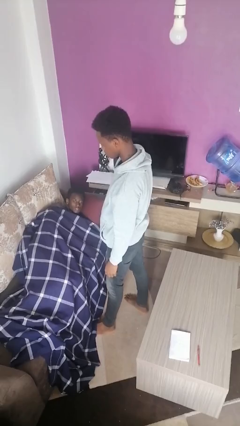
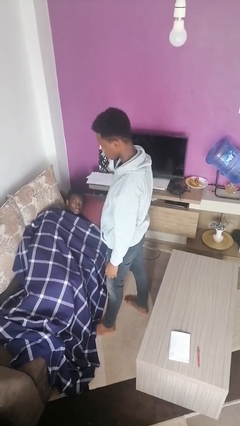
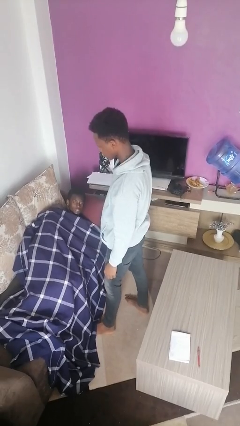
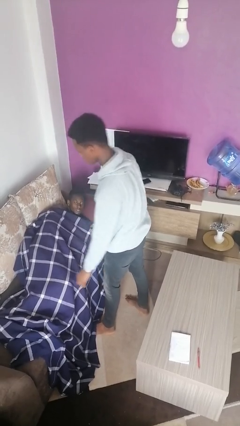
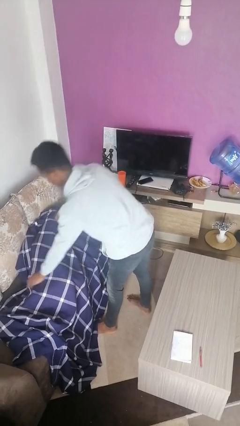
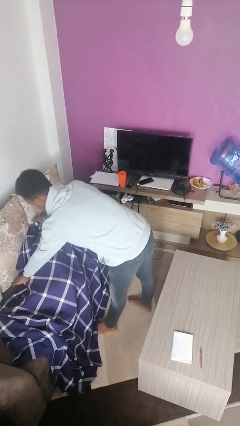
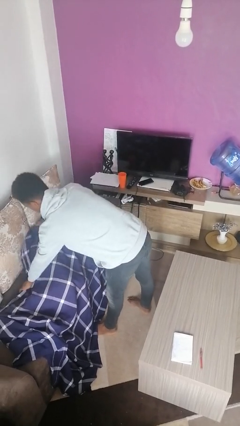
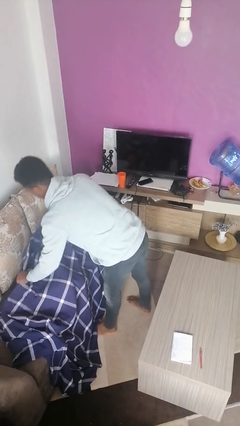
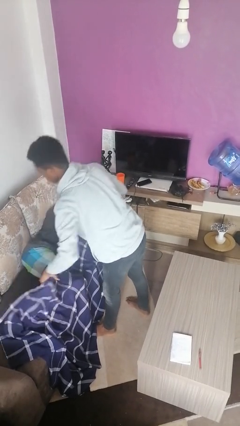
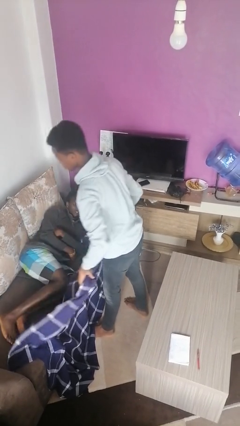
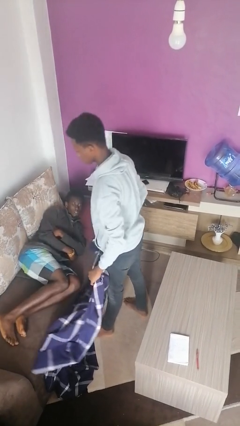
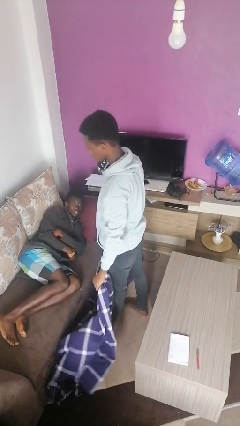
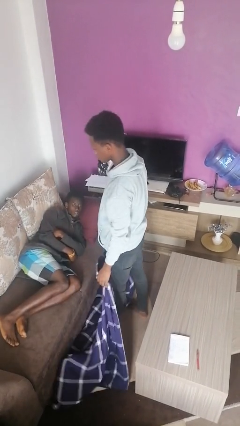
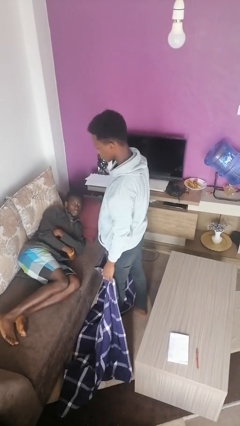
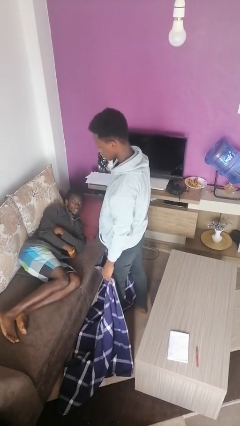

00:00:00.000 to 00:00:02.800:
person uncovers friend with blanket

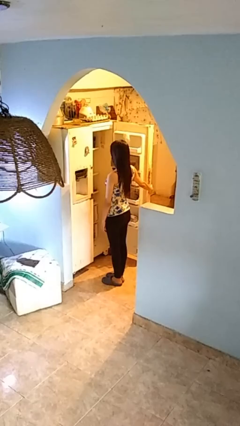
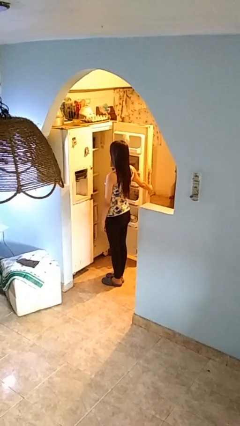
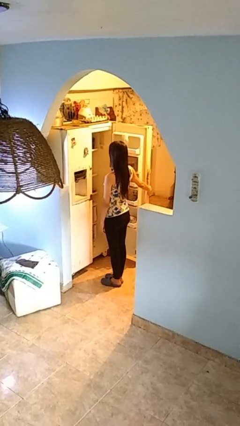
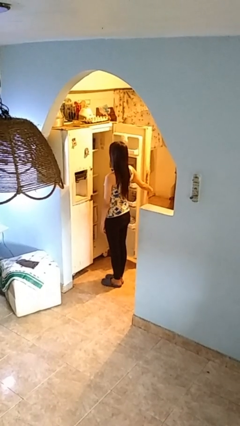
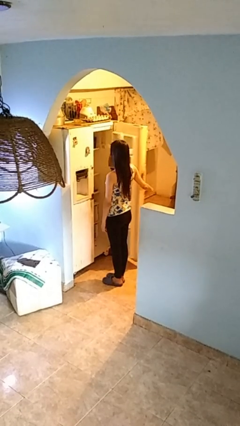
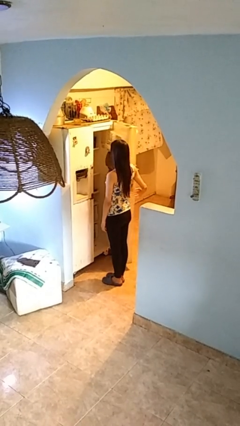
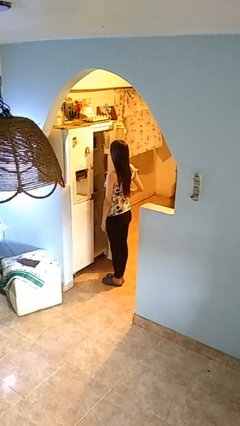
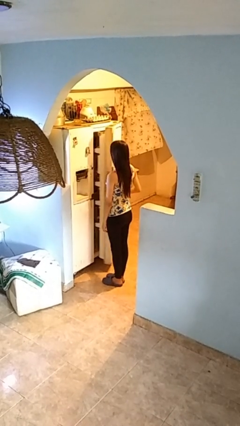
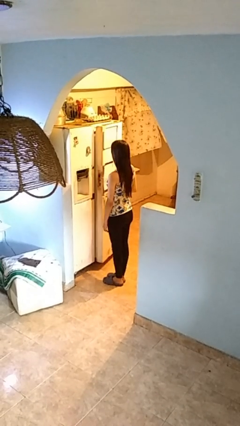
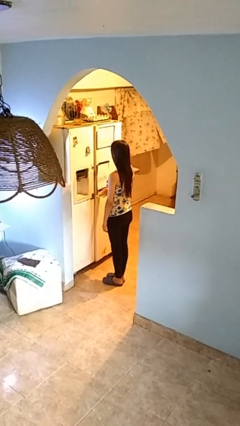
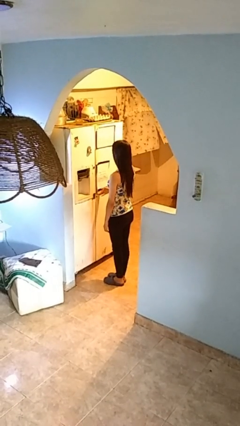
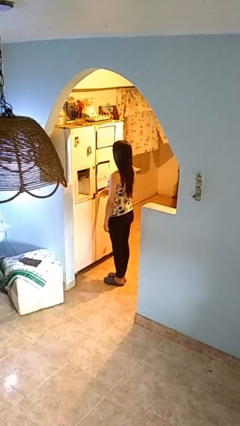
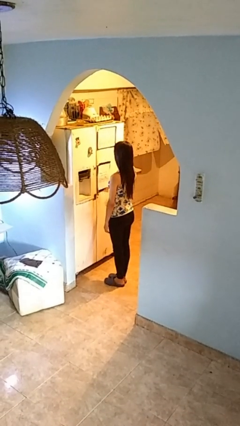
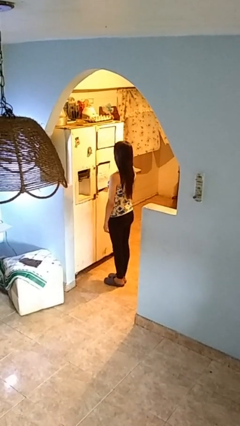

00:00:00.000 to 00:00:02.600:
person closes refrigerator

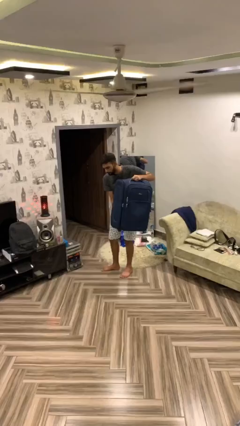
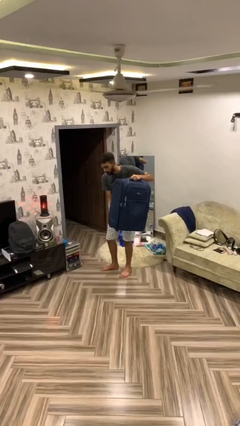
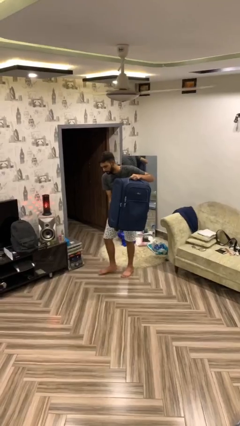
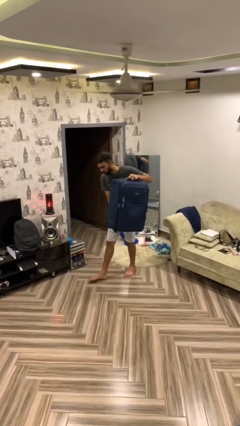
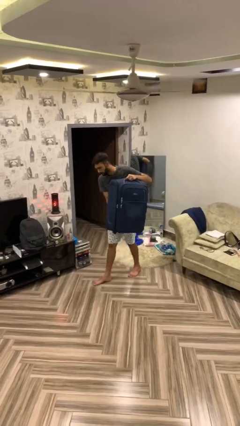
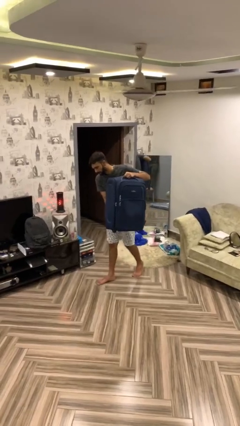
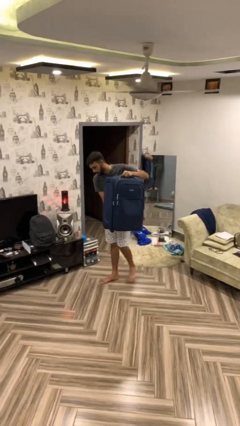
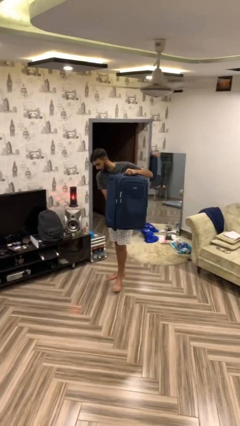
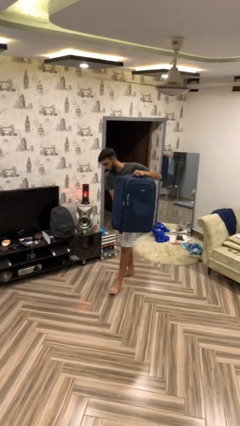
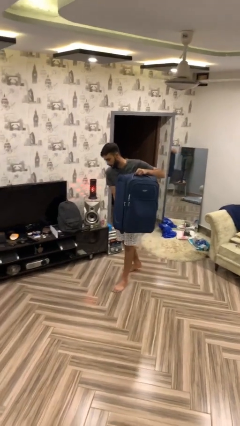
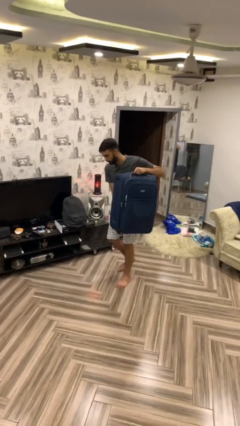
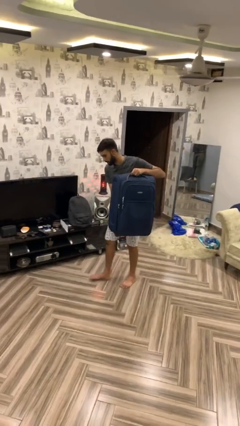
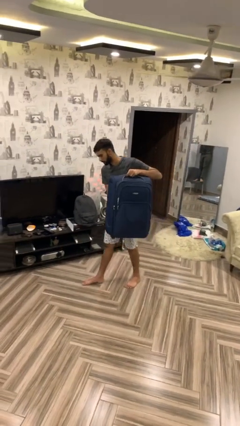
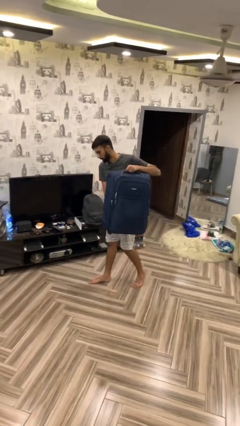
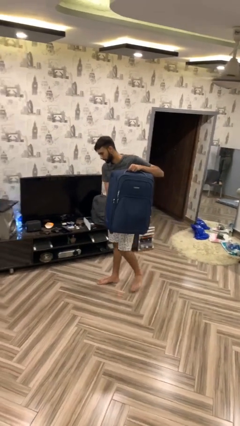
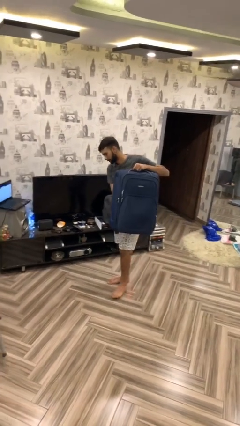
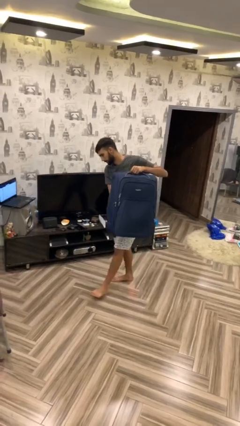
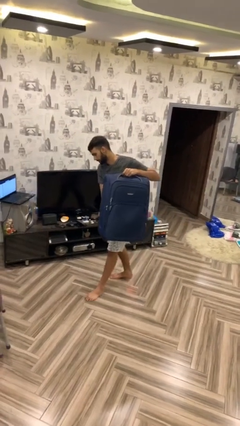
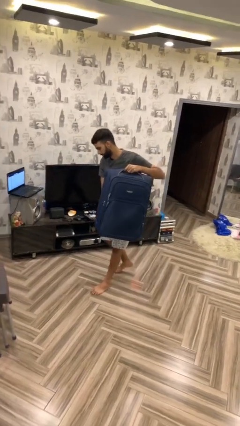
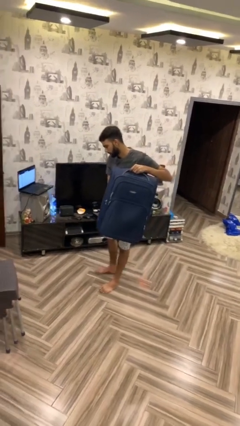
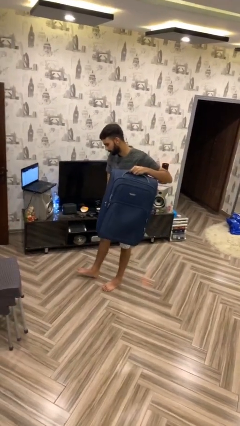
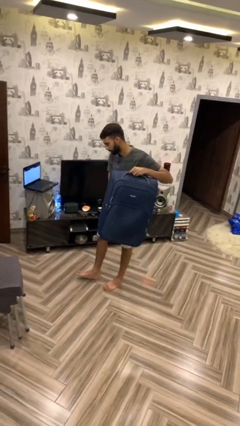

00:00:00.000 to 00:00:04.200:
person carries heavy object

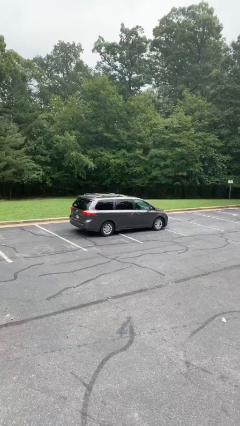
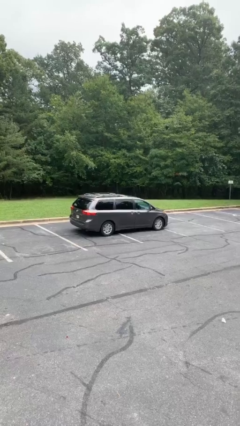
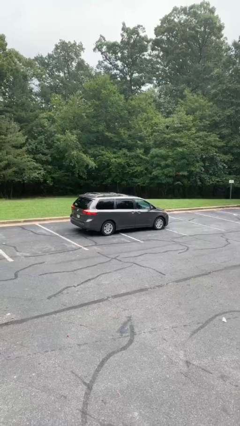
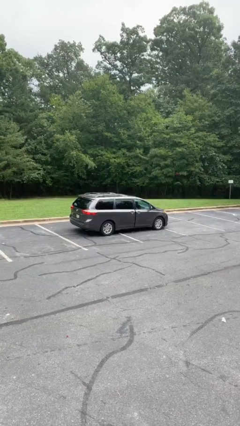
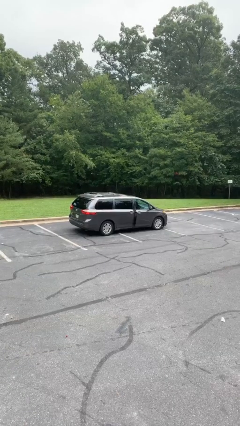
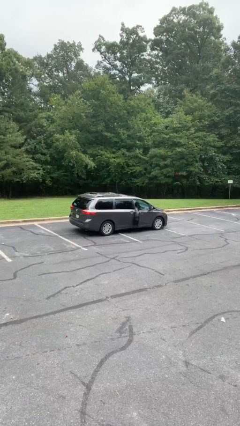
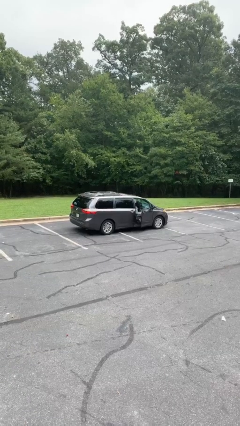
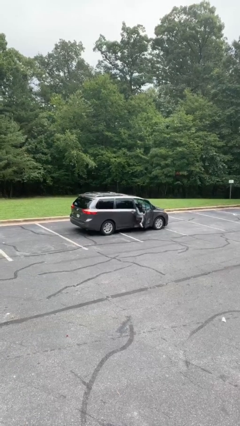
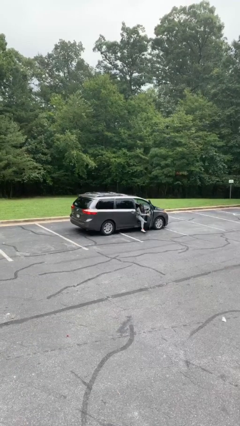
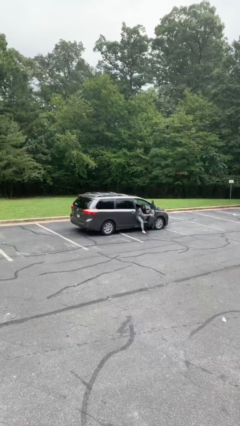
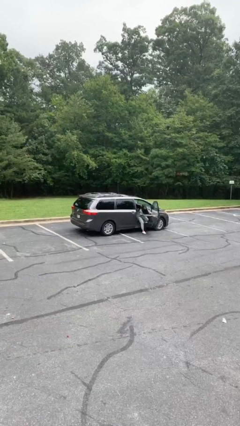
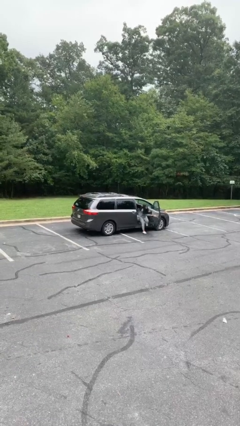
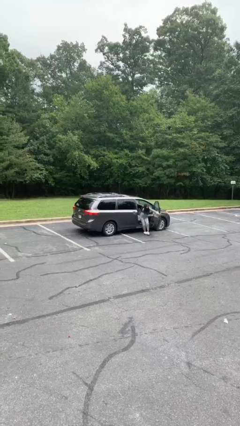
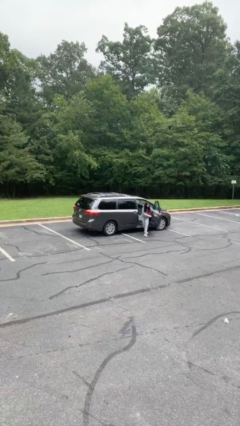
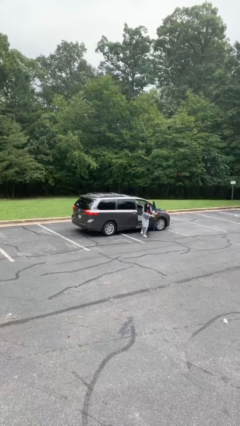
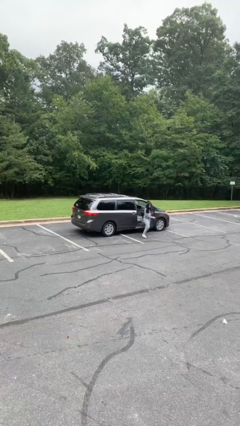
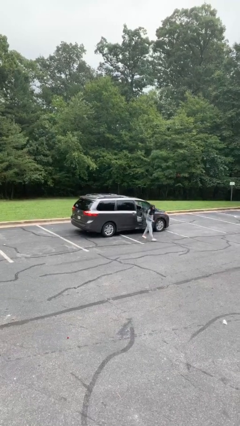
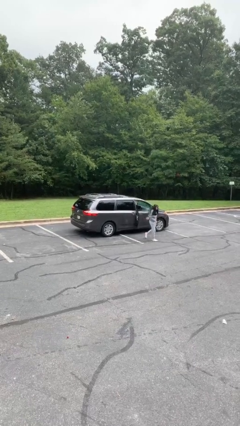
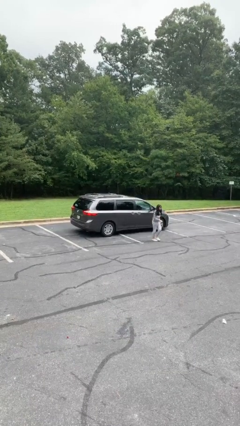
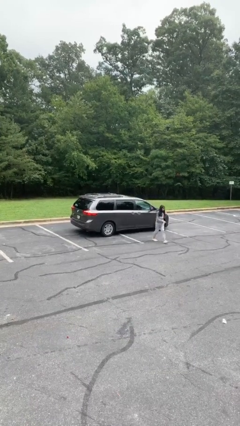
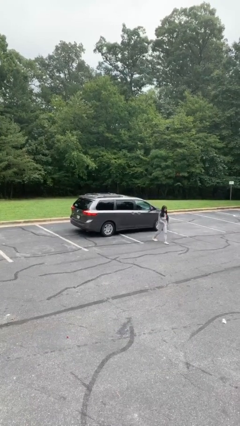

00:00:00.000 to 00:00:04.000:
car drops off person

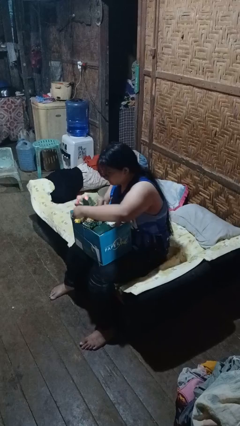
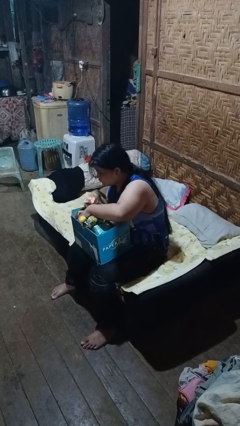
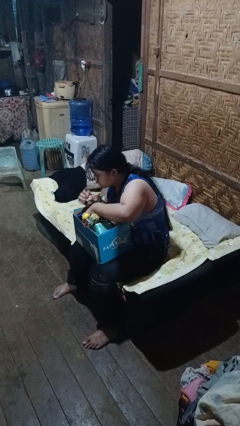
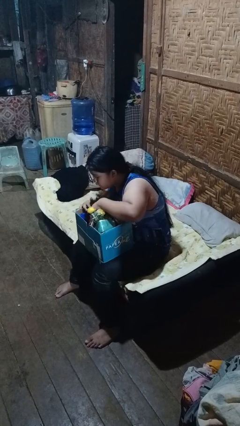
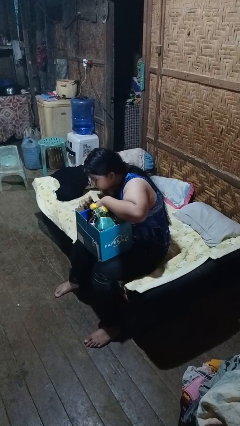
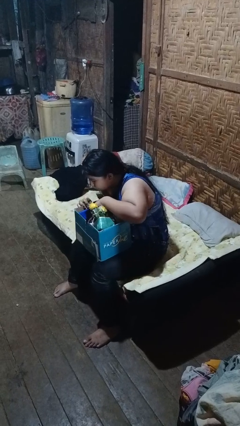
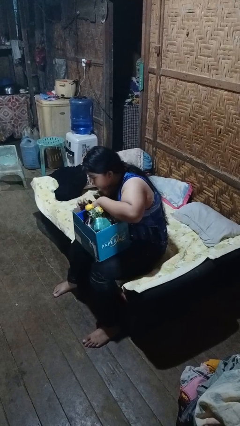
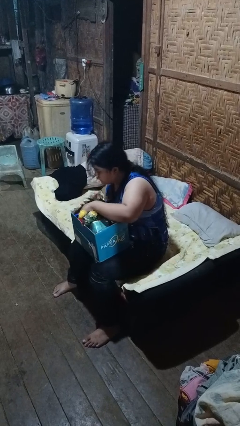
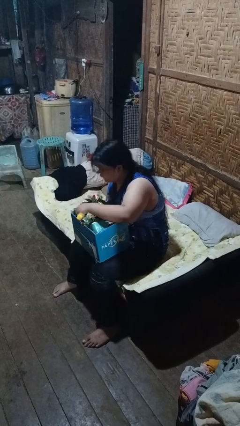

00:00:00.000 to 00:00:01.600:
person searches in box

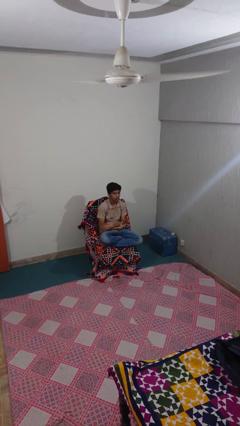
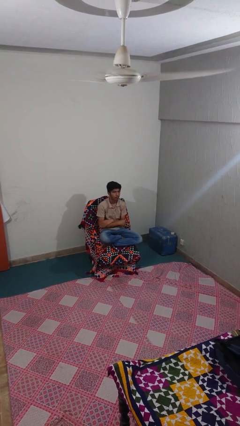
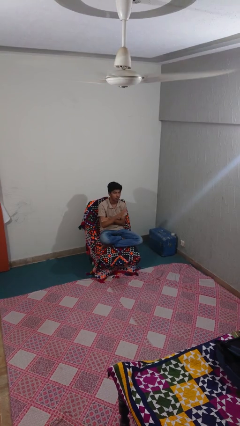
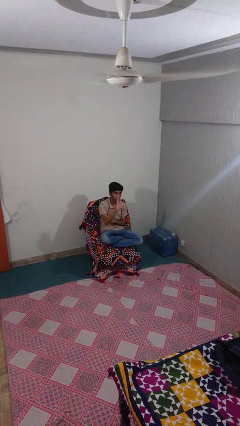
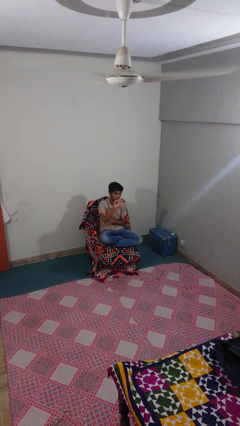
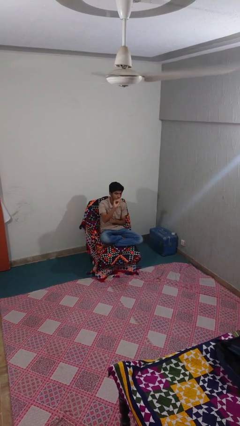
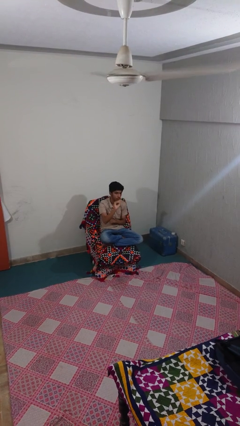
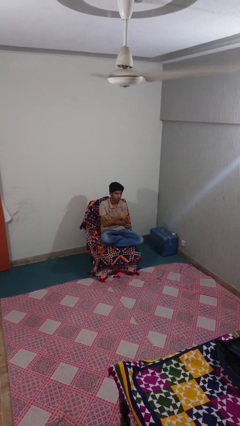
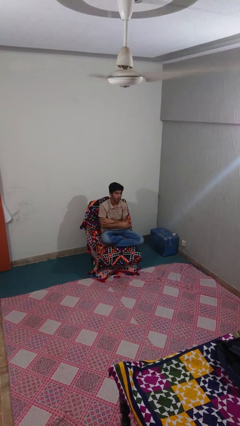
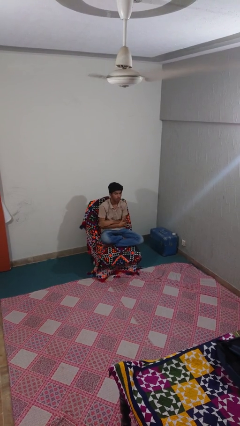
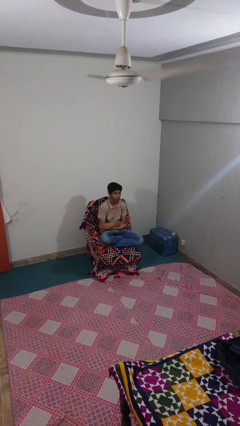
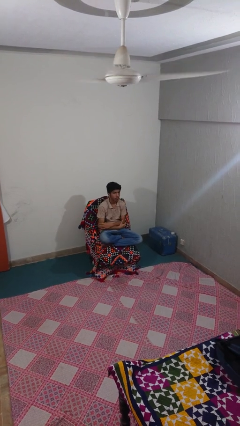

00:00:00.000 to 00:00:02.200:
person gestures come here
